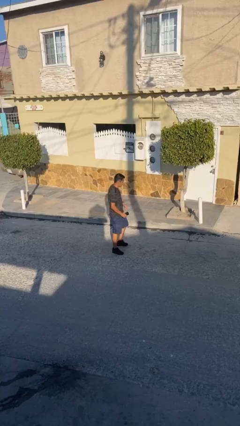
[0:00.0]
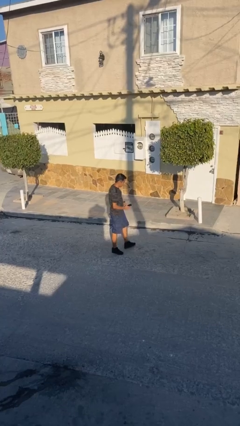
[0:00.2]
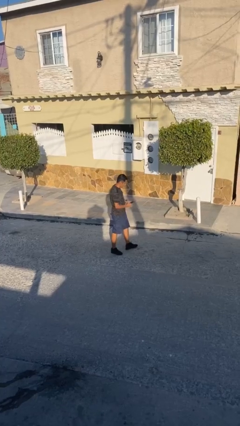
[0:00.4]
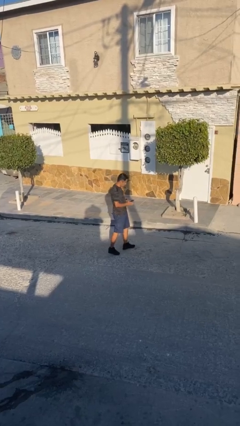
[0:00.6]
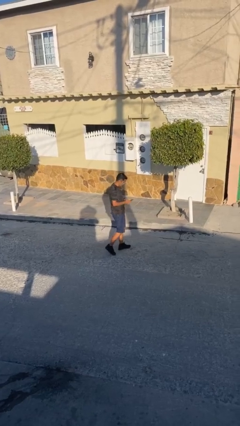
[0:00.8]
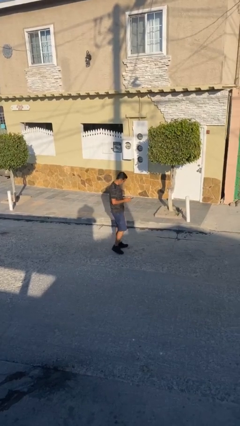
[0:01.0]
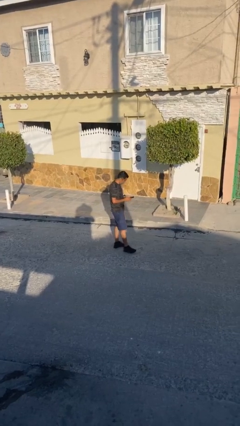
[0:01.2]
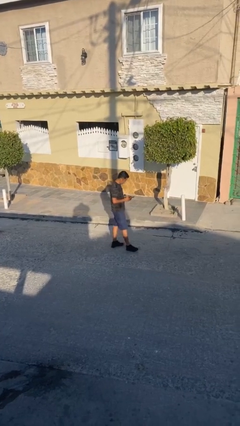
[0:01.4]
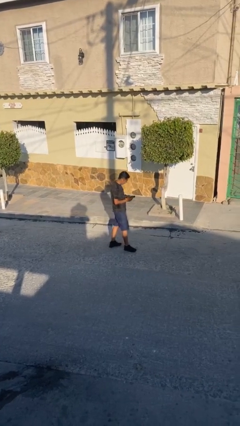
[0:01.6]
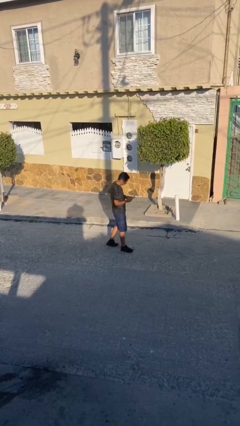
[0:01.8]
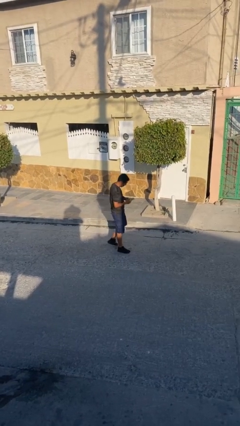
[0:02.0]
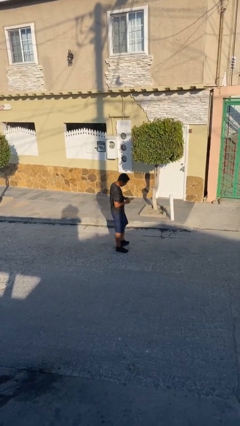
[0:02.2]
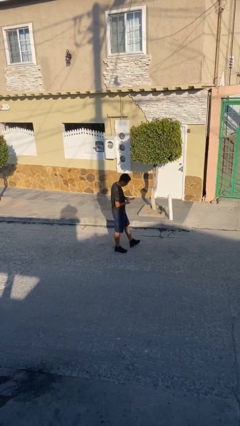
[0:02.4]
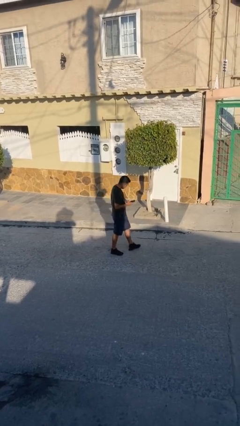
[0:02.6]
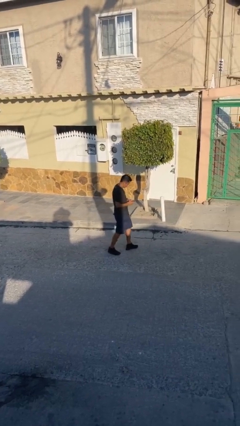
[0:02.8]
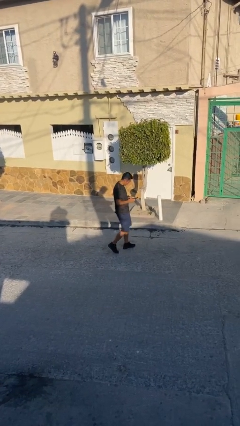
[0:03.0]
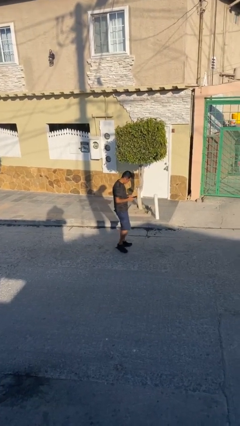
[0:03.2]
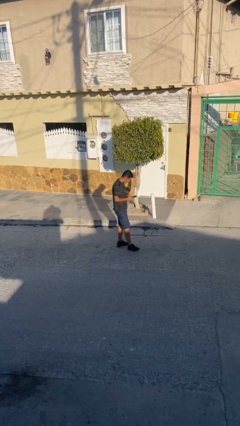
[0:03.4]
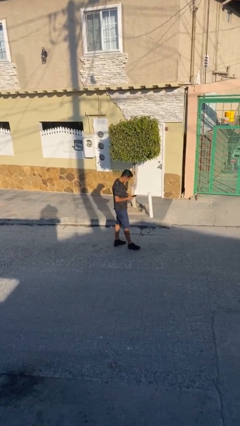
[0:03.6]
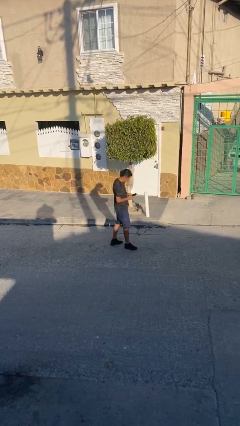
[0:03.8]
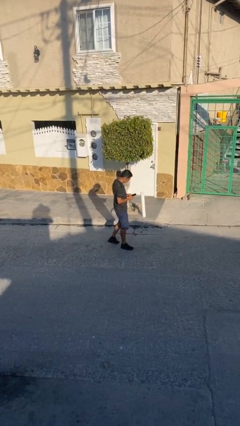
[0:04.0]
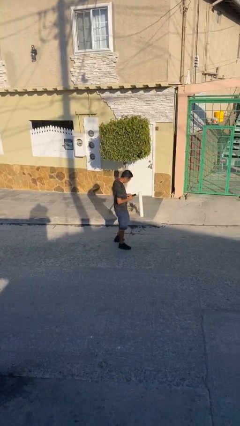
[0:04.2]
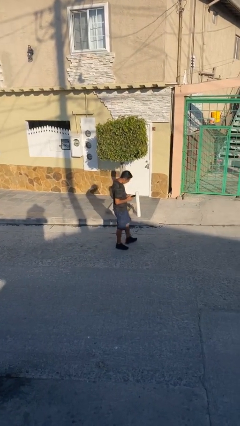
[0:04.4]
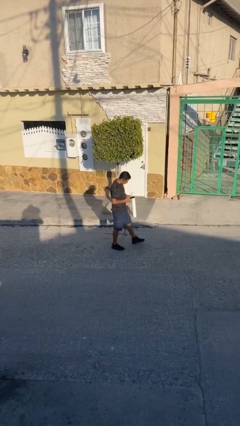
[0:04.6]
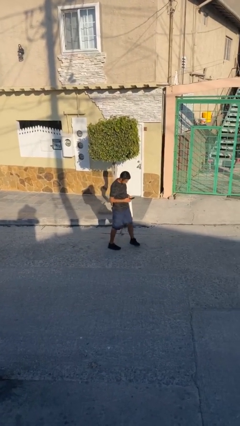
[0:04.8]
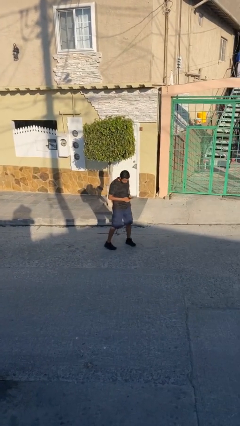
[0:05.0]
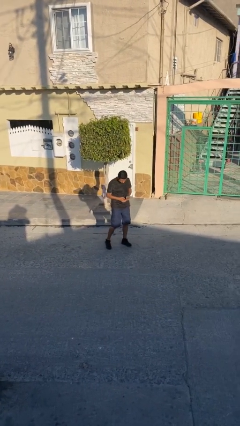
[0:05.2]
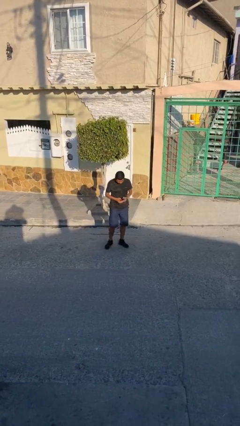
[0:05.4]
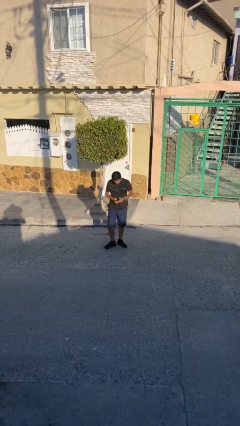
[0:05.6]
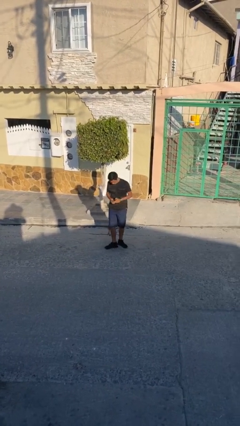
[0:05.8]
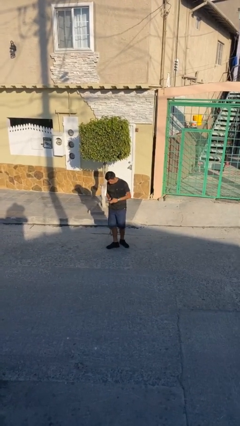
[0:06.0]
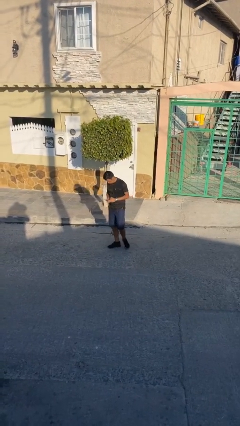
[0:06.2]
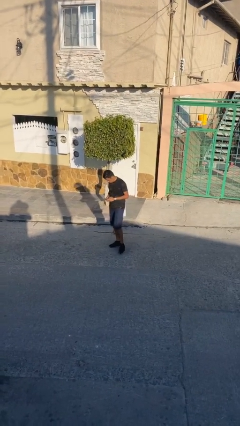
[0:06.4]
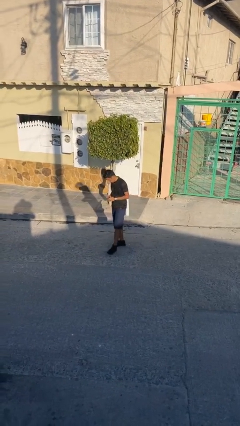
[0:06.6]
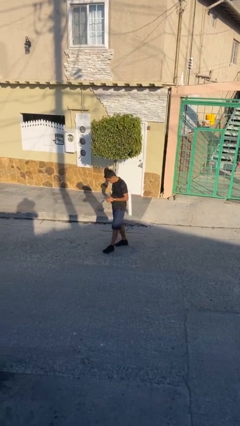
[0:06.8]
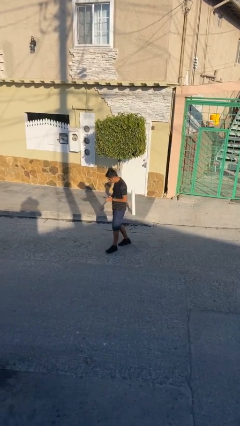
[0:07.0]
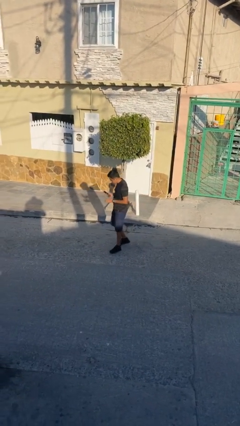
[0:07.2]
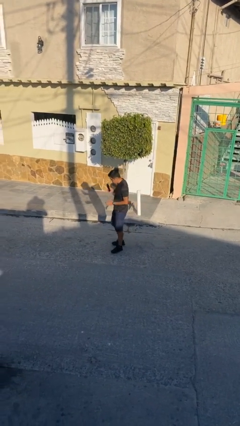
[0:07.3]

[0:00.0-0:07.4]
person texts on phone

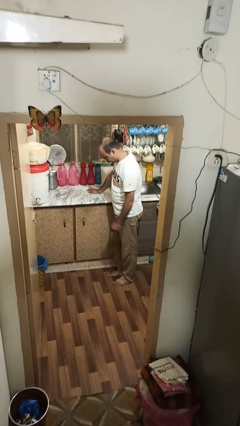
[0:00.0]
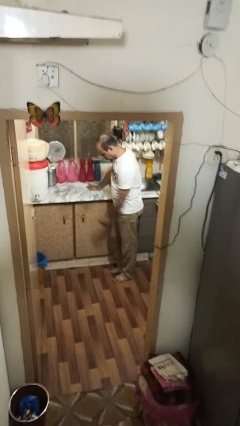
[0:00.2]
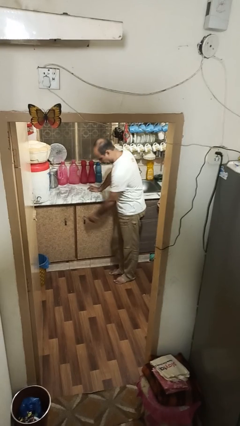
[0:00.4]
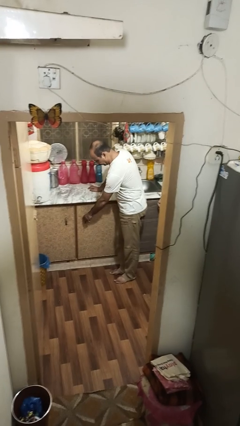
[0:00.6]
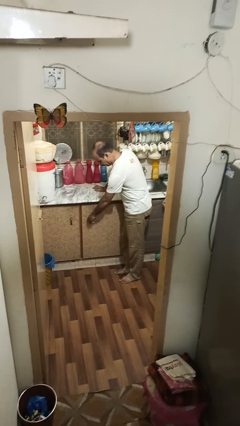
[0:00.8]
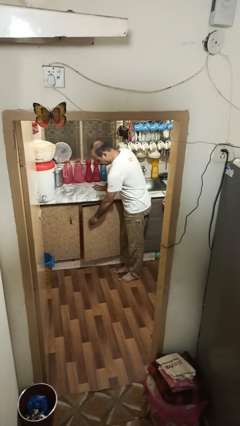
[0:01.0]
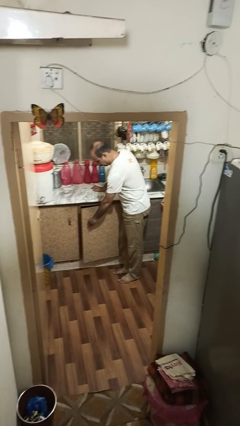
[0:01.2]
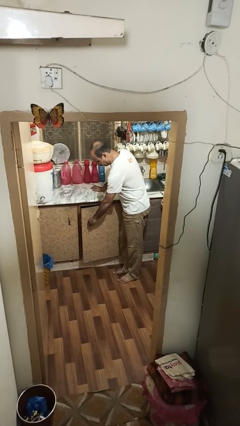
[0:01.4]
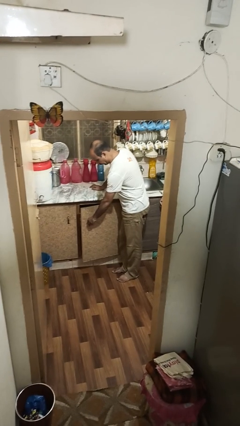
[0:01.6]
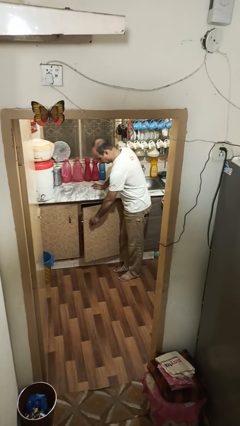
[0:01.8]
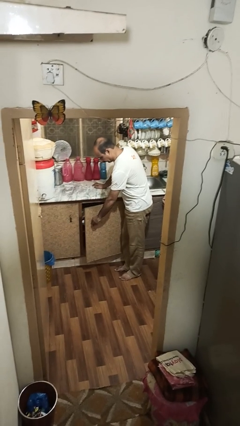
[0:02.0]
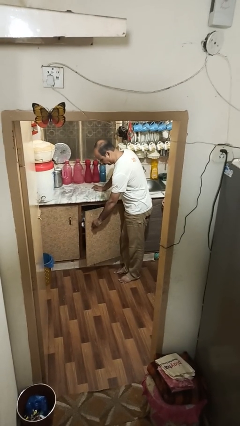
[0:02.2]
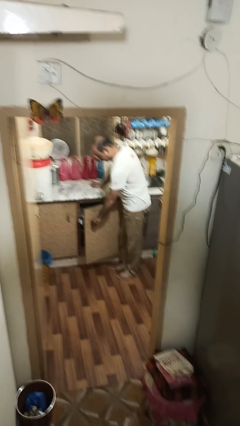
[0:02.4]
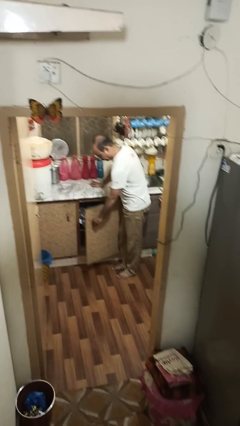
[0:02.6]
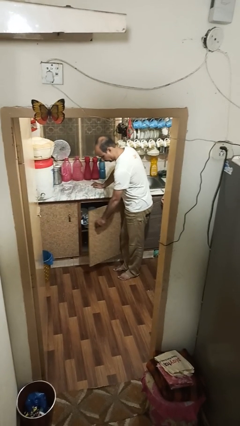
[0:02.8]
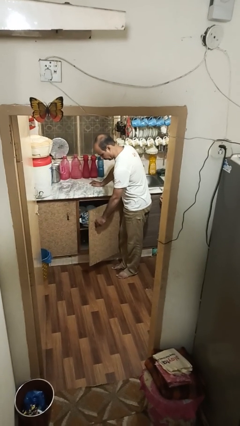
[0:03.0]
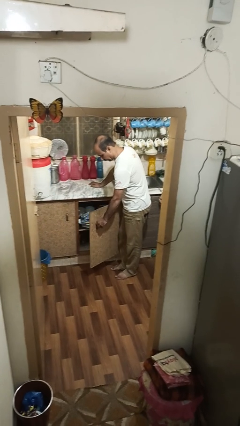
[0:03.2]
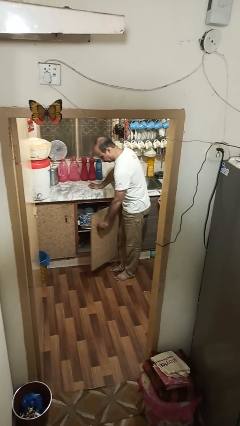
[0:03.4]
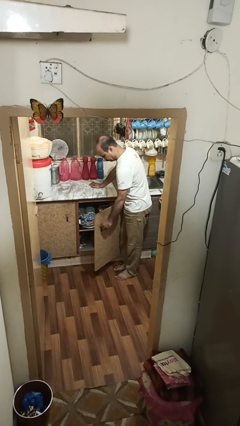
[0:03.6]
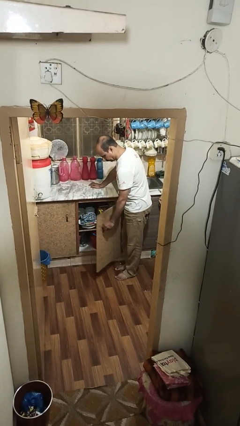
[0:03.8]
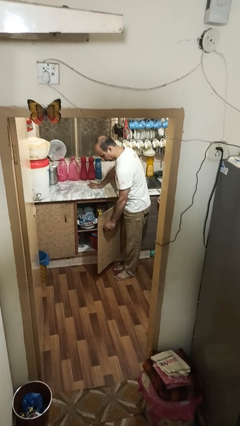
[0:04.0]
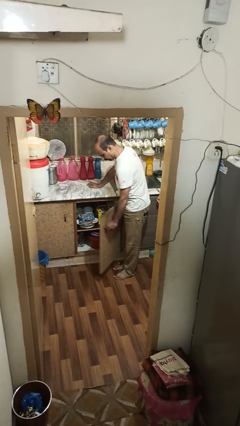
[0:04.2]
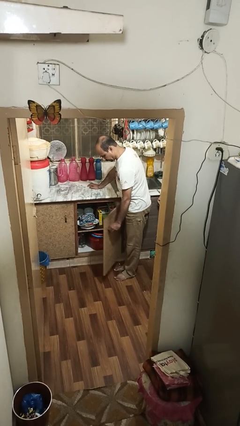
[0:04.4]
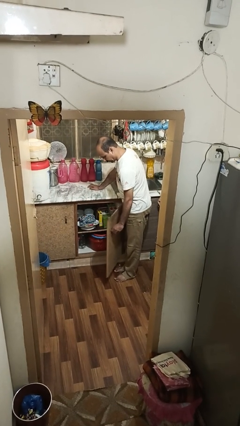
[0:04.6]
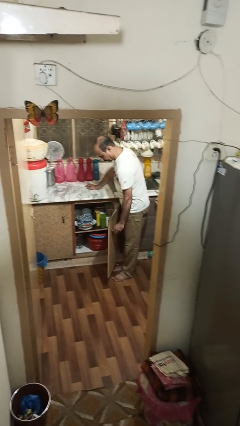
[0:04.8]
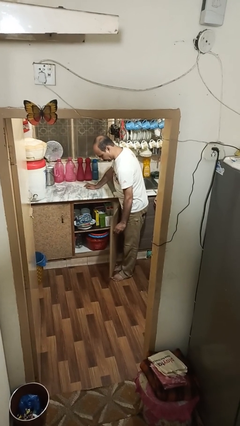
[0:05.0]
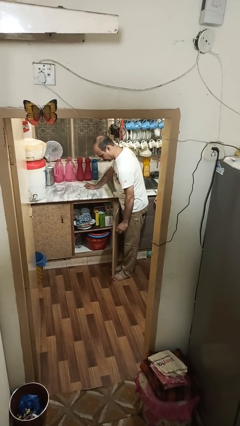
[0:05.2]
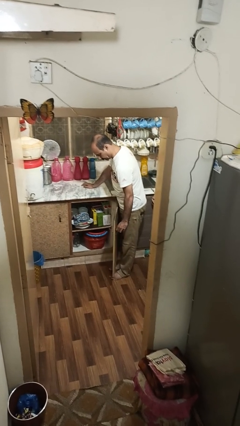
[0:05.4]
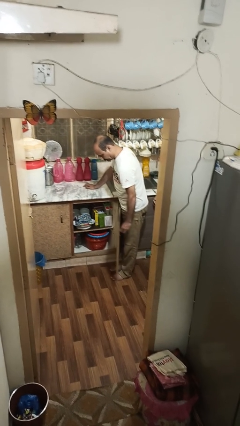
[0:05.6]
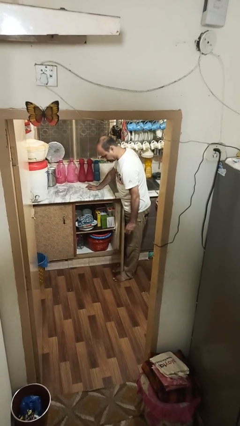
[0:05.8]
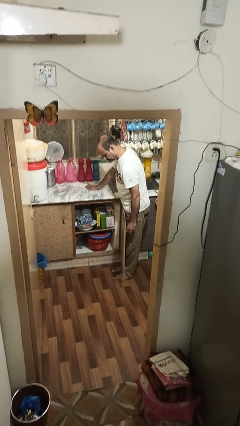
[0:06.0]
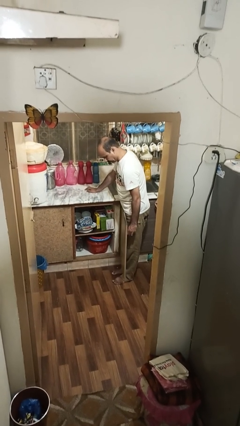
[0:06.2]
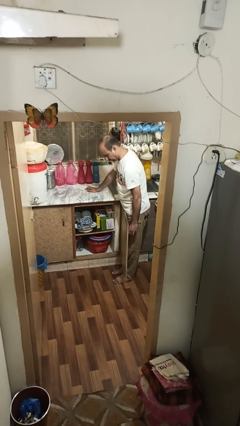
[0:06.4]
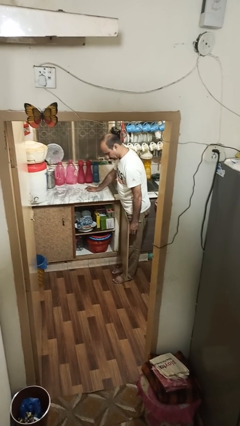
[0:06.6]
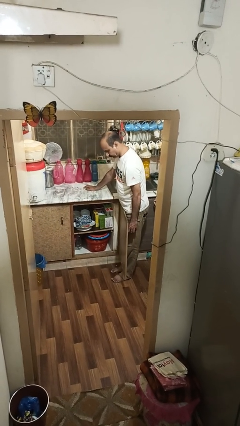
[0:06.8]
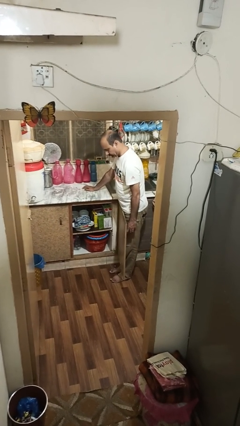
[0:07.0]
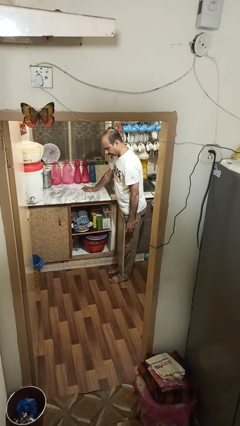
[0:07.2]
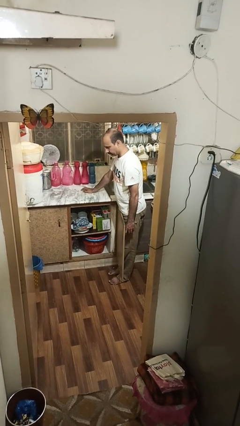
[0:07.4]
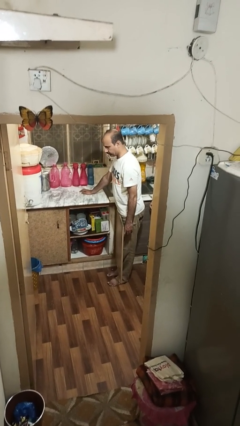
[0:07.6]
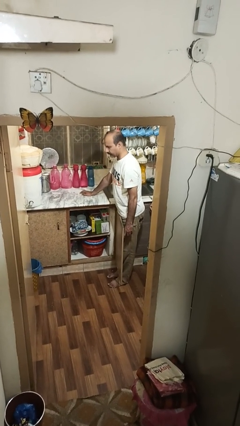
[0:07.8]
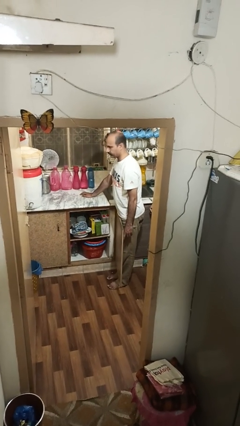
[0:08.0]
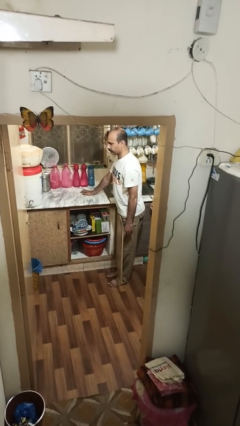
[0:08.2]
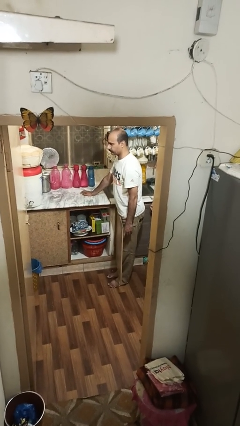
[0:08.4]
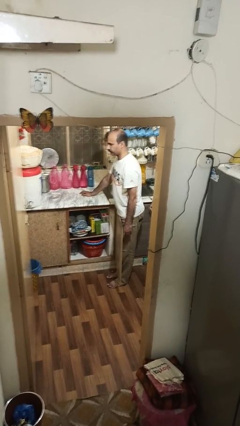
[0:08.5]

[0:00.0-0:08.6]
person opens cabinet

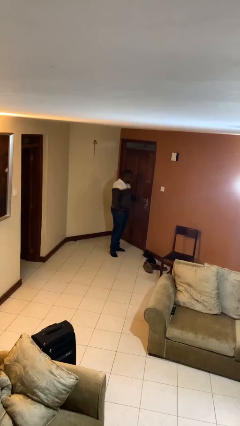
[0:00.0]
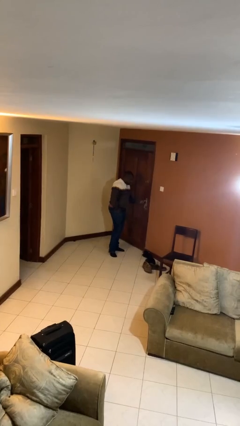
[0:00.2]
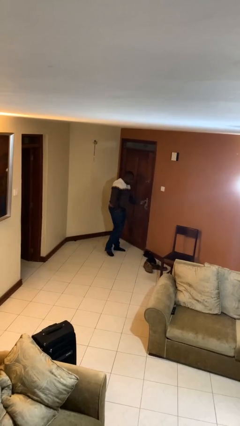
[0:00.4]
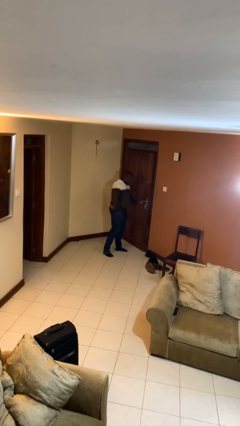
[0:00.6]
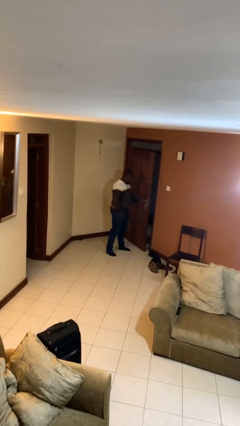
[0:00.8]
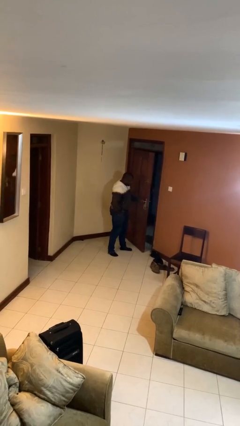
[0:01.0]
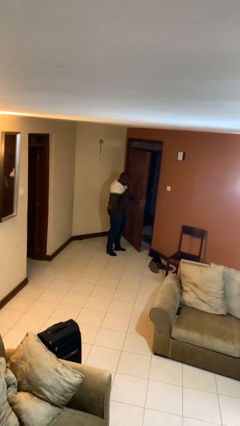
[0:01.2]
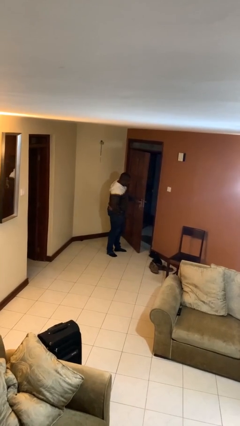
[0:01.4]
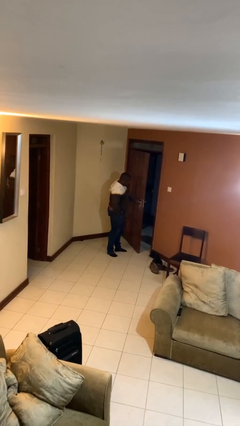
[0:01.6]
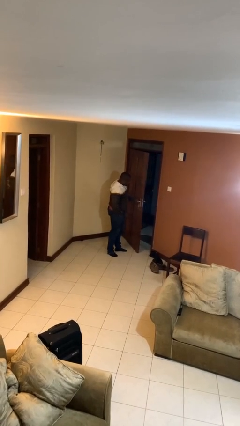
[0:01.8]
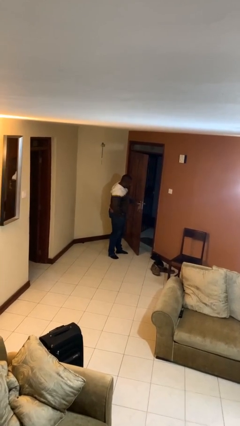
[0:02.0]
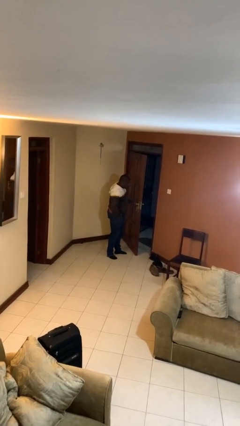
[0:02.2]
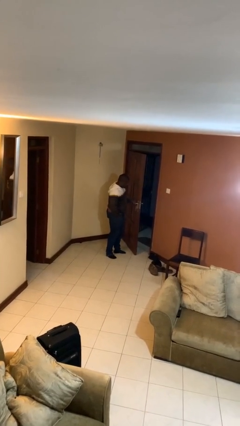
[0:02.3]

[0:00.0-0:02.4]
person opens facility door
